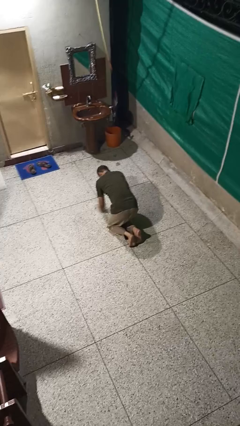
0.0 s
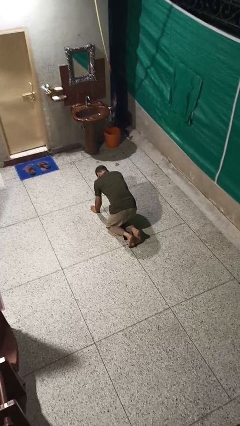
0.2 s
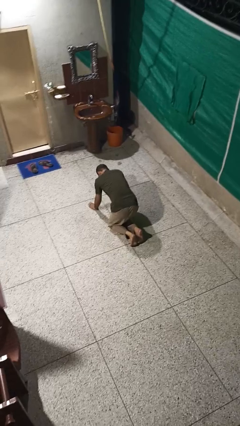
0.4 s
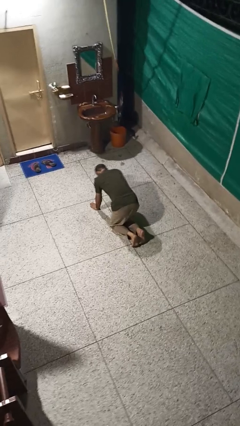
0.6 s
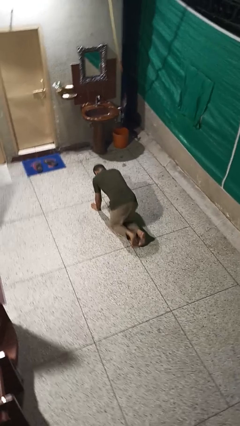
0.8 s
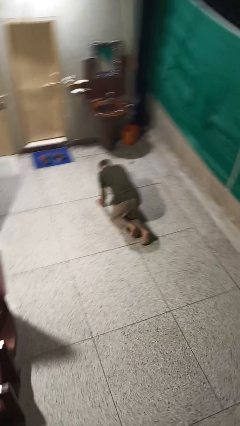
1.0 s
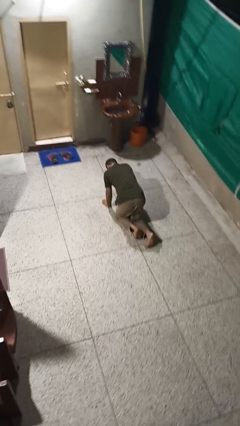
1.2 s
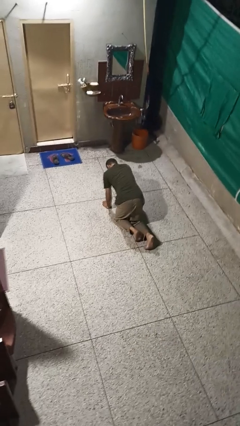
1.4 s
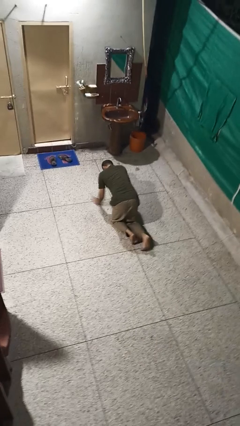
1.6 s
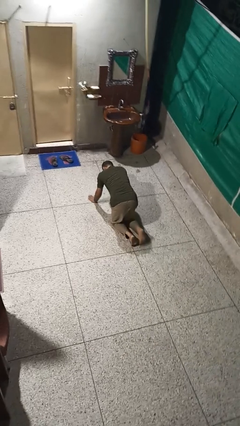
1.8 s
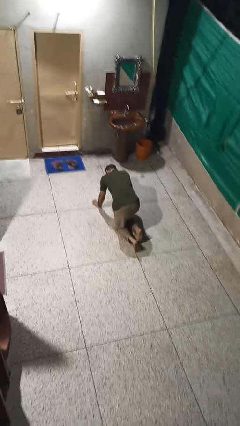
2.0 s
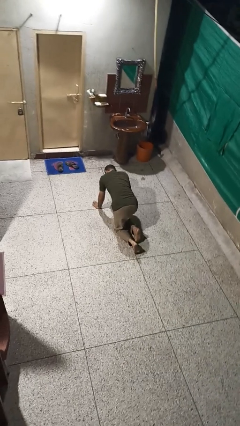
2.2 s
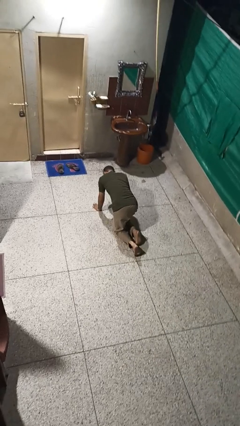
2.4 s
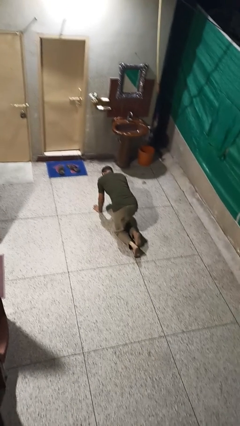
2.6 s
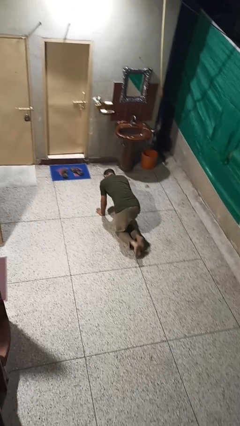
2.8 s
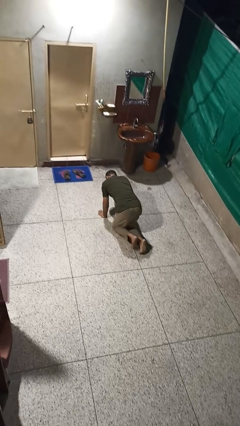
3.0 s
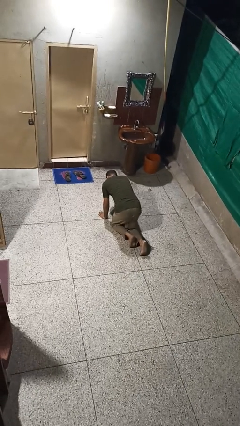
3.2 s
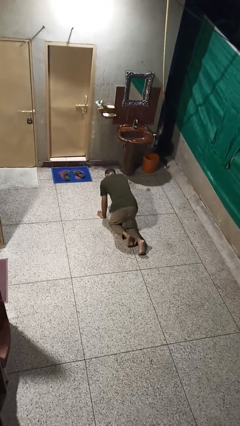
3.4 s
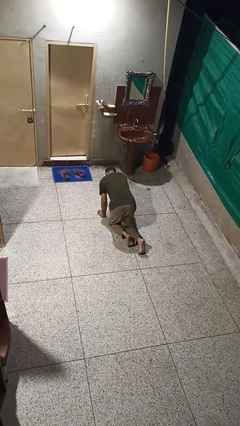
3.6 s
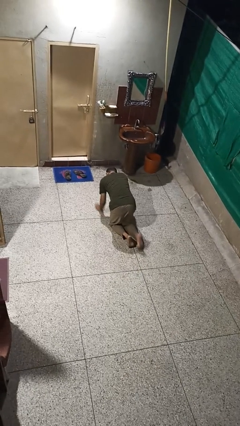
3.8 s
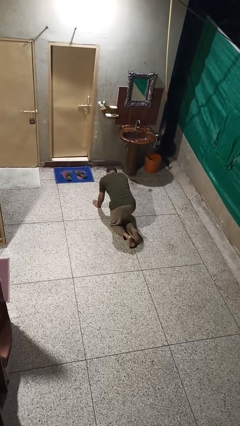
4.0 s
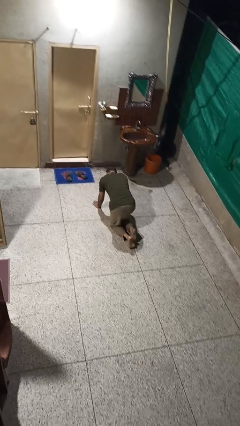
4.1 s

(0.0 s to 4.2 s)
person crawls

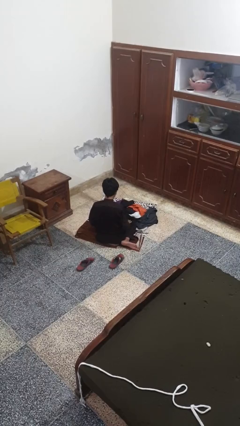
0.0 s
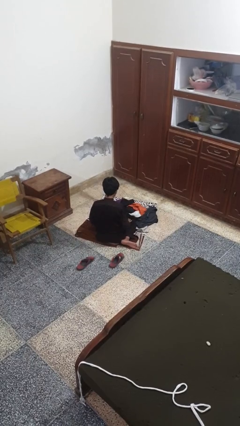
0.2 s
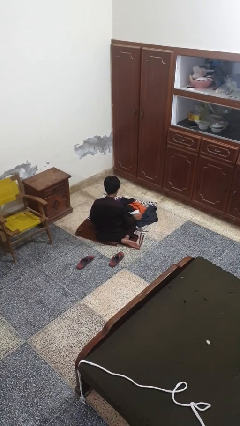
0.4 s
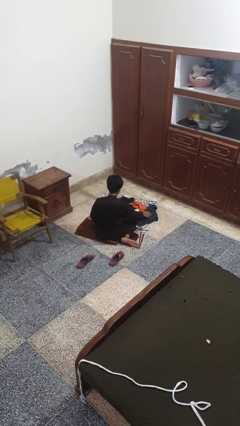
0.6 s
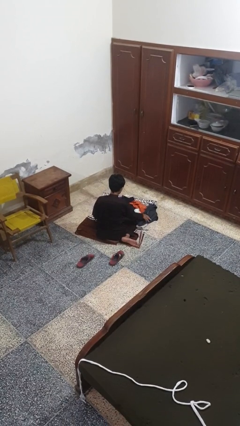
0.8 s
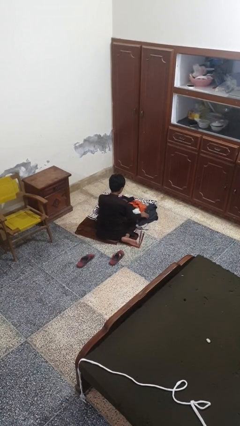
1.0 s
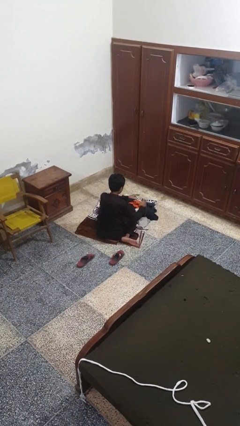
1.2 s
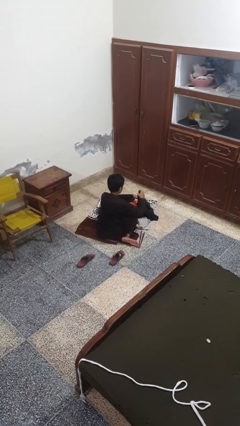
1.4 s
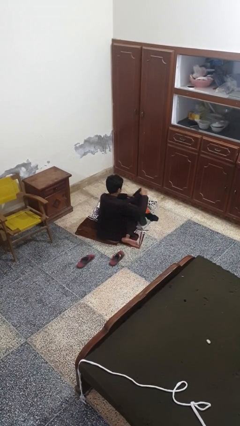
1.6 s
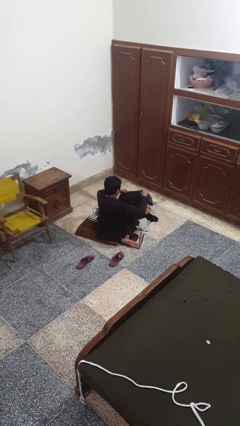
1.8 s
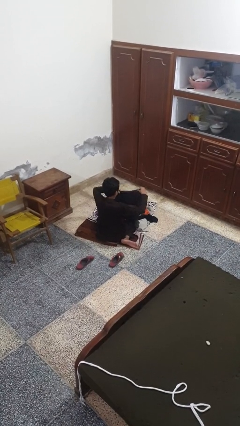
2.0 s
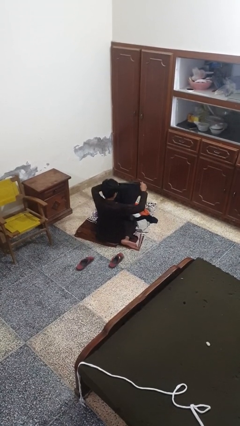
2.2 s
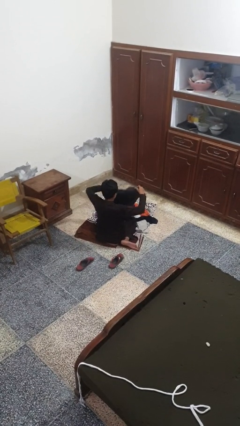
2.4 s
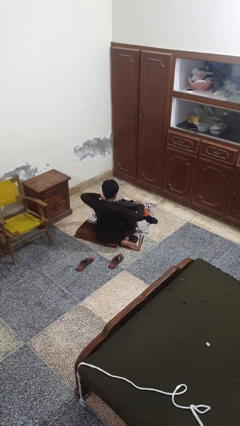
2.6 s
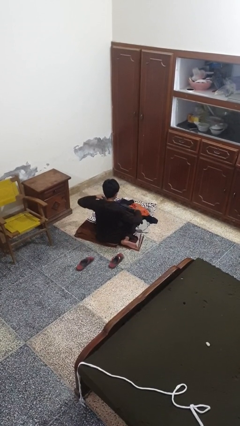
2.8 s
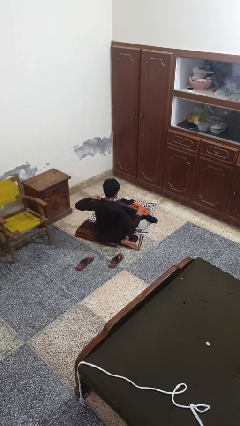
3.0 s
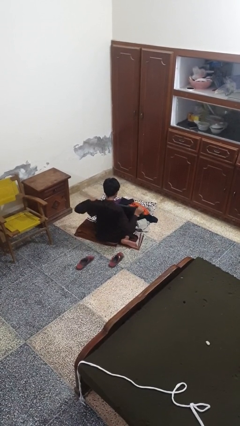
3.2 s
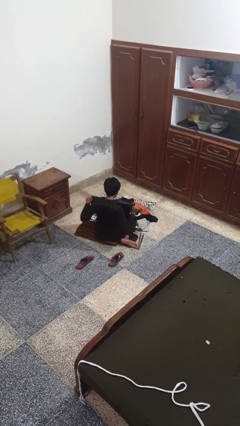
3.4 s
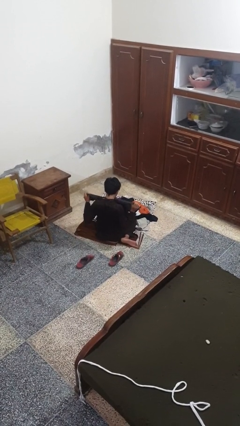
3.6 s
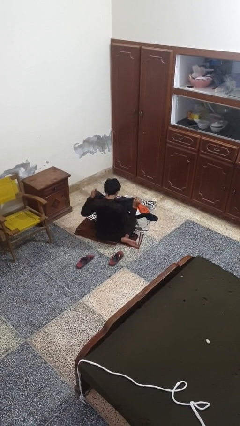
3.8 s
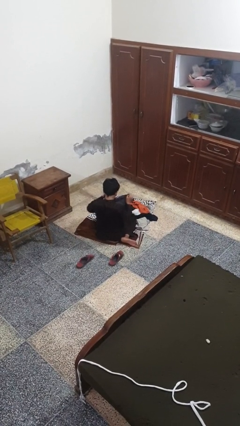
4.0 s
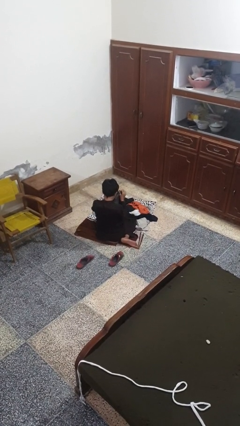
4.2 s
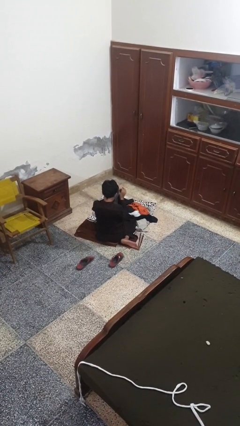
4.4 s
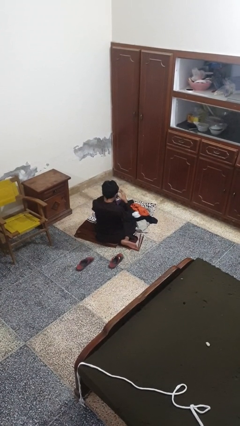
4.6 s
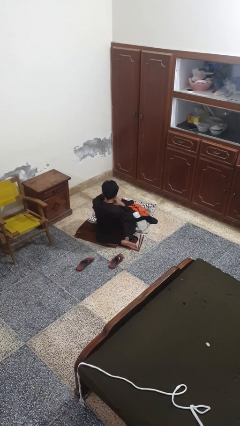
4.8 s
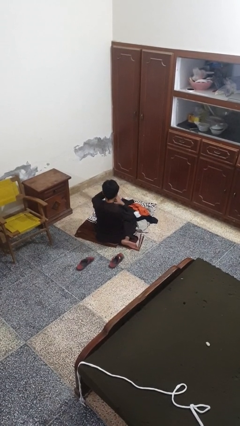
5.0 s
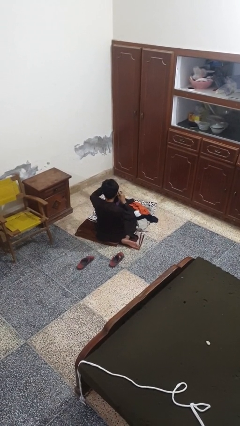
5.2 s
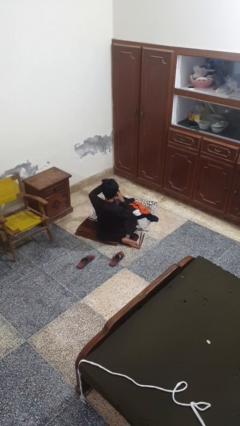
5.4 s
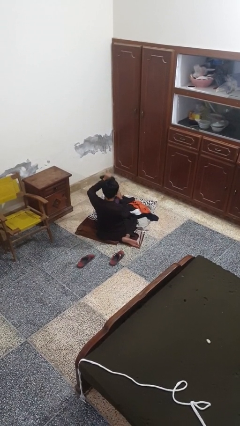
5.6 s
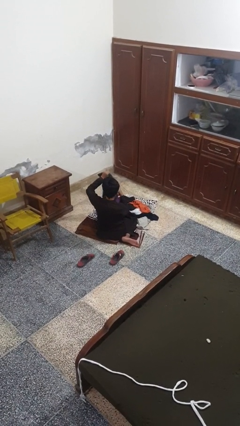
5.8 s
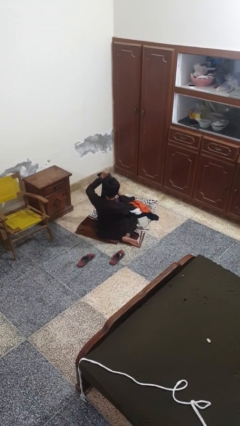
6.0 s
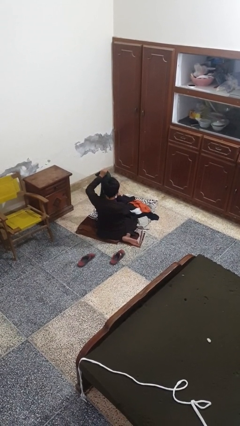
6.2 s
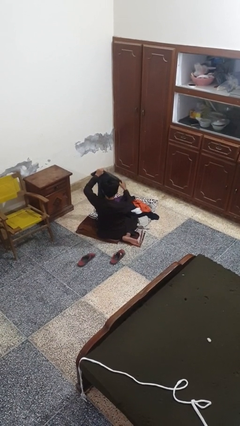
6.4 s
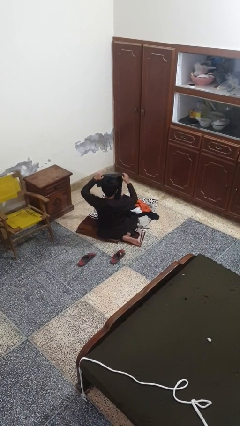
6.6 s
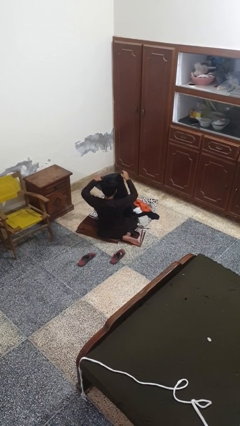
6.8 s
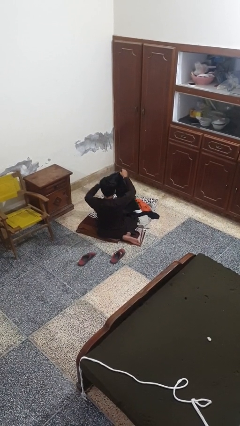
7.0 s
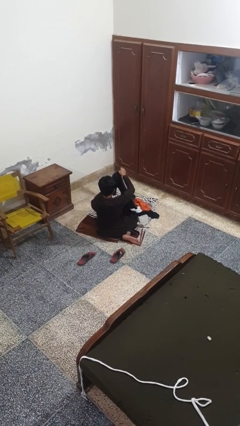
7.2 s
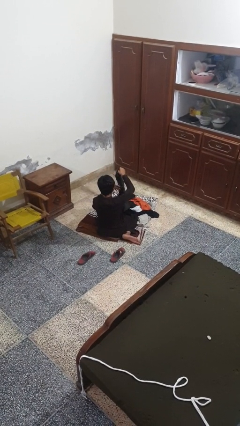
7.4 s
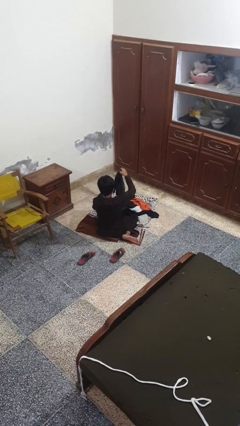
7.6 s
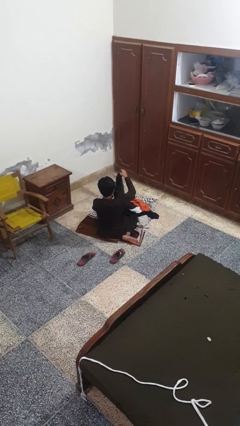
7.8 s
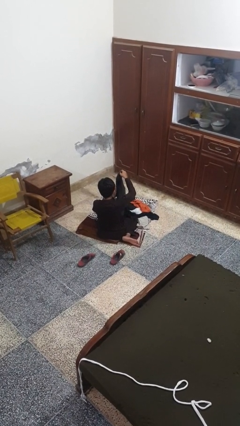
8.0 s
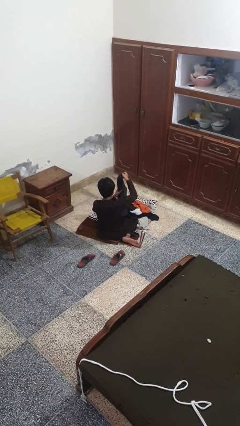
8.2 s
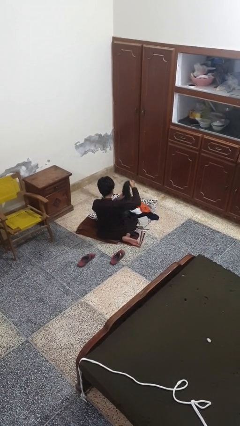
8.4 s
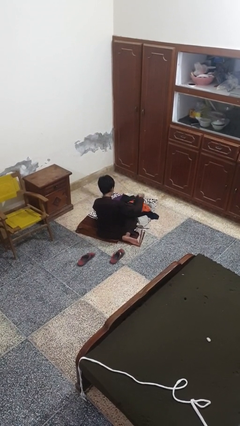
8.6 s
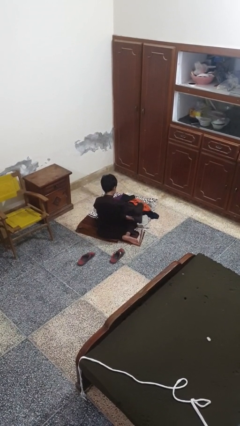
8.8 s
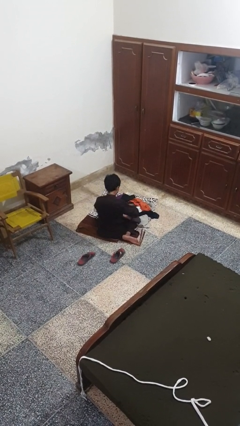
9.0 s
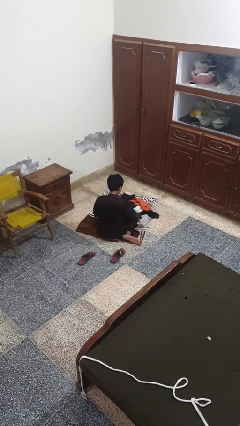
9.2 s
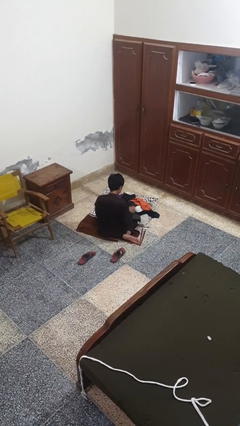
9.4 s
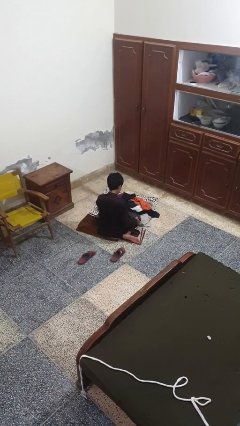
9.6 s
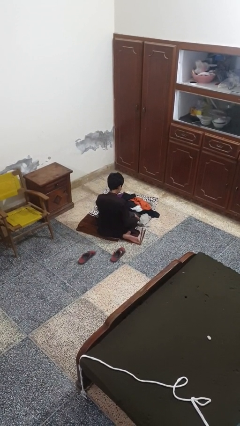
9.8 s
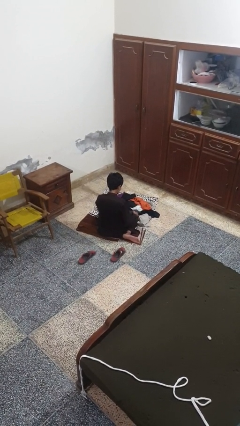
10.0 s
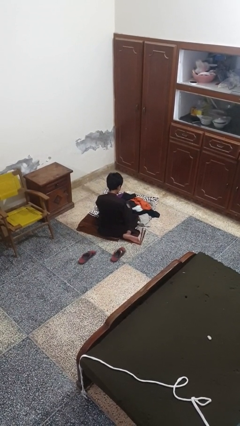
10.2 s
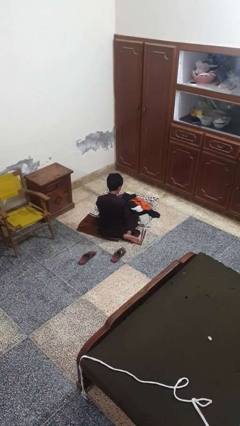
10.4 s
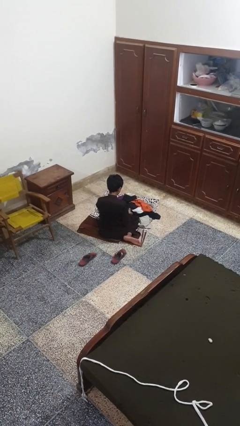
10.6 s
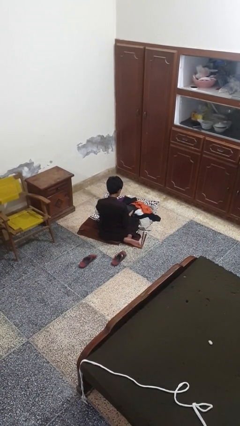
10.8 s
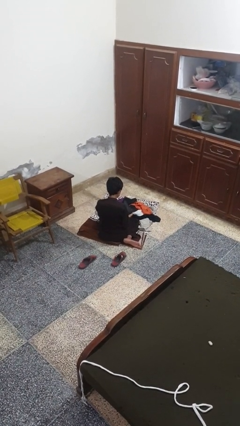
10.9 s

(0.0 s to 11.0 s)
person folds shirt

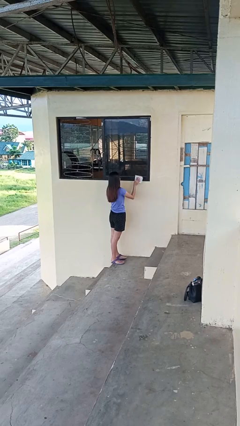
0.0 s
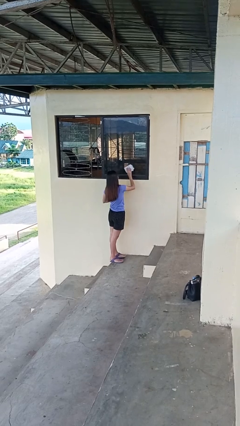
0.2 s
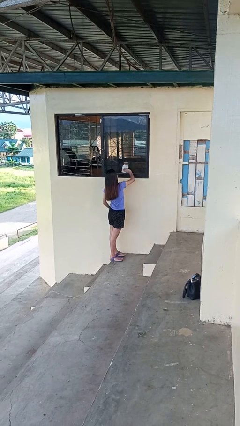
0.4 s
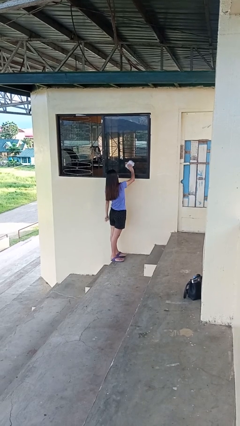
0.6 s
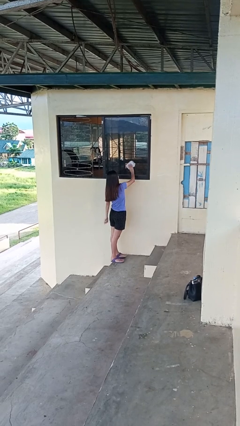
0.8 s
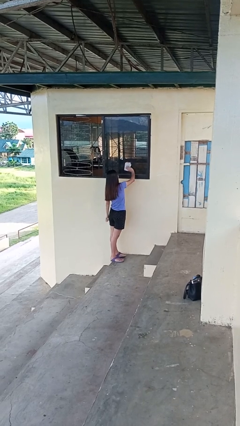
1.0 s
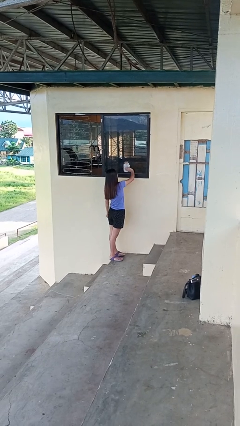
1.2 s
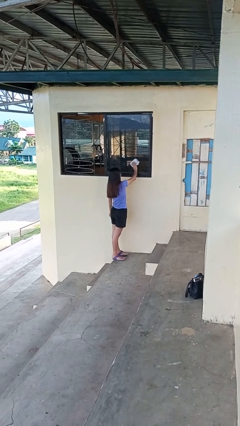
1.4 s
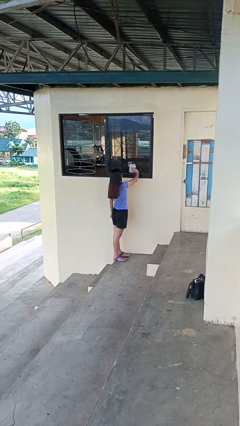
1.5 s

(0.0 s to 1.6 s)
person washes window

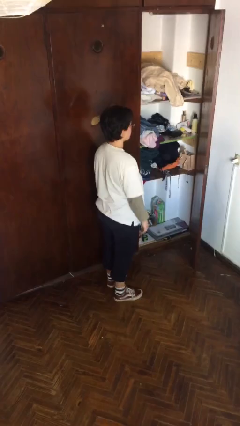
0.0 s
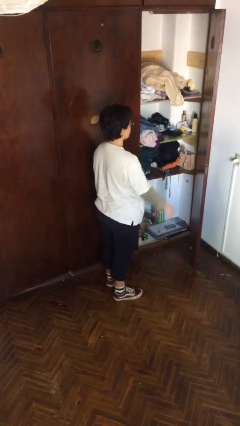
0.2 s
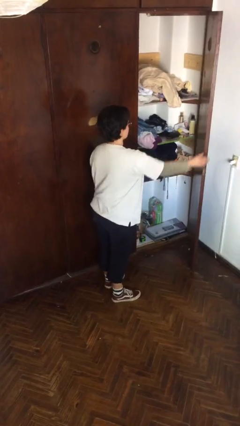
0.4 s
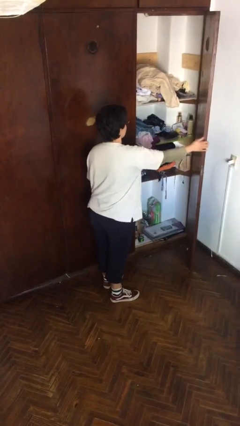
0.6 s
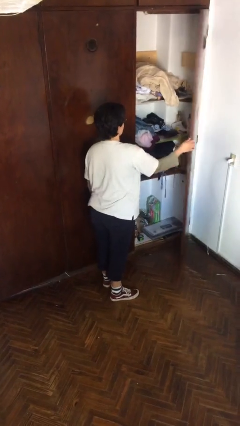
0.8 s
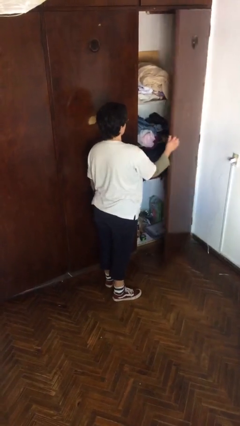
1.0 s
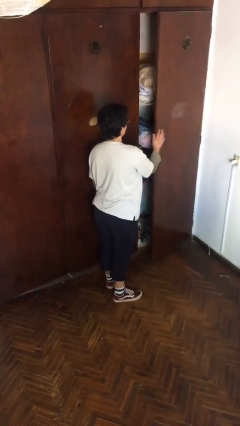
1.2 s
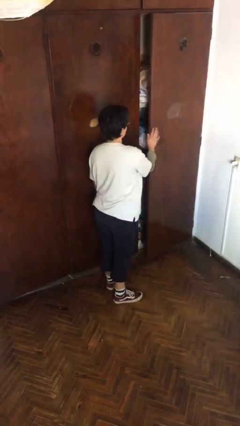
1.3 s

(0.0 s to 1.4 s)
person closes closet door
